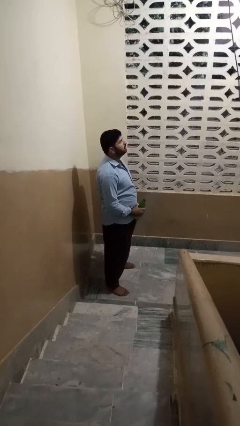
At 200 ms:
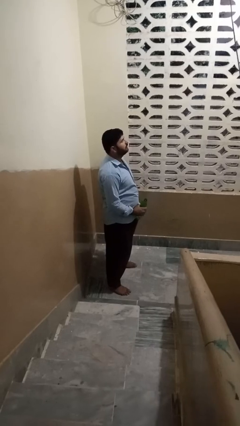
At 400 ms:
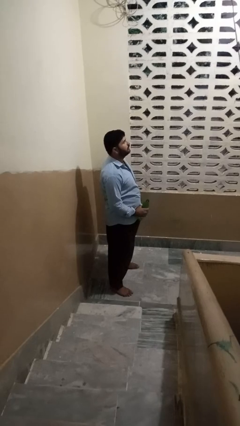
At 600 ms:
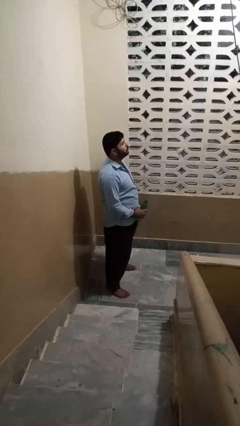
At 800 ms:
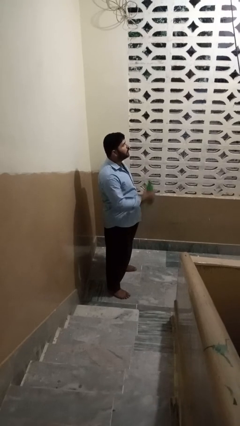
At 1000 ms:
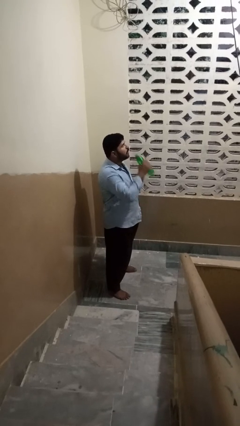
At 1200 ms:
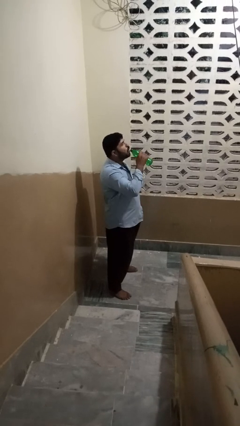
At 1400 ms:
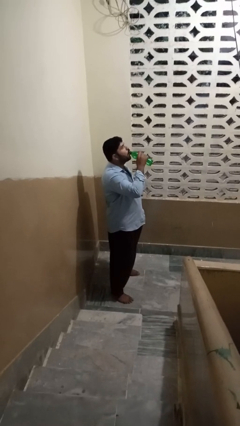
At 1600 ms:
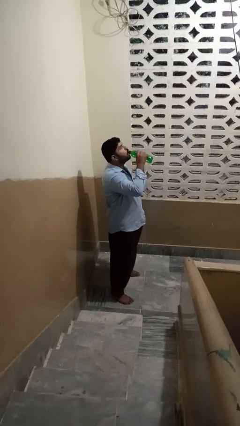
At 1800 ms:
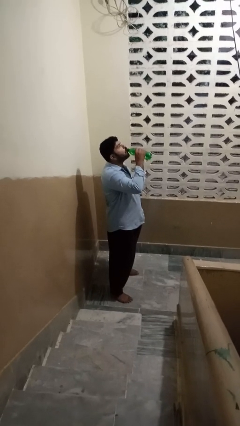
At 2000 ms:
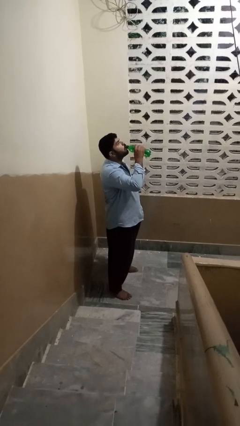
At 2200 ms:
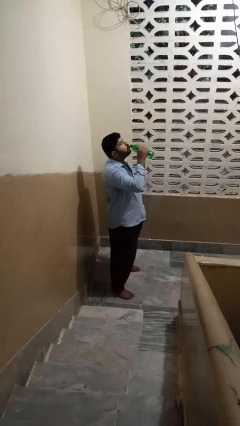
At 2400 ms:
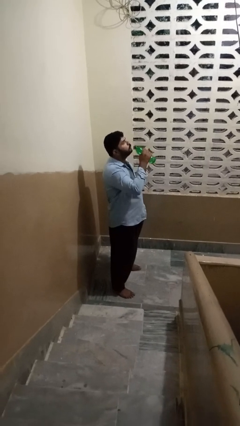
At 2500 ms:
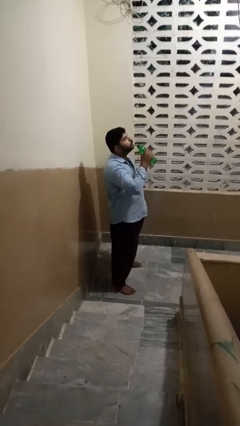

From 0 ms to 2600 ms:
person drinks from bottle

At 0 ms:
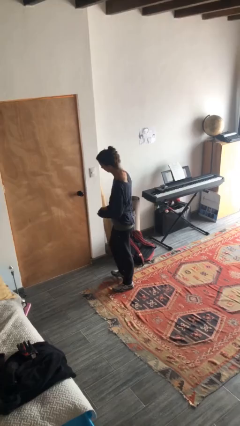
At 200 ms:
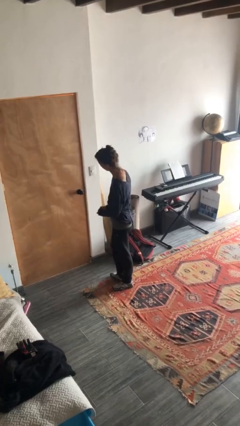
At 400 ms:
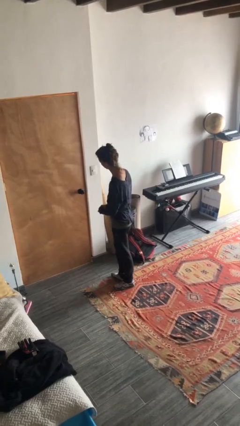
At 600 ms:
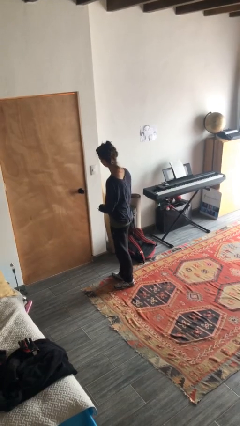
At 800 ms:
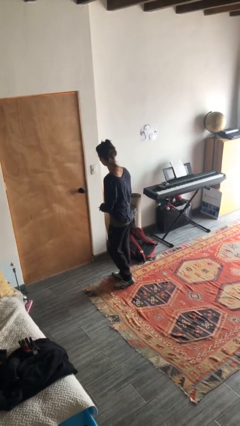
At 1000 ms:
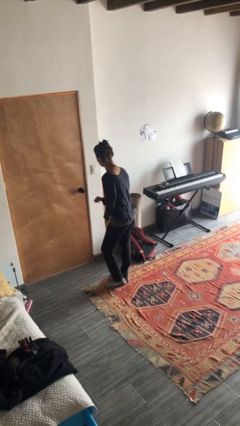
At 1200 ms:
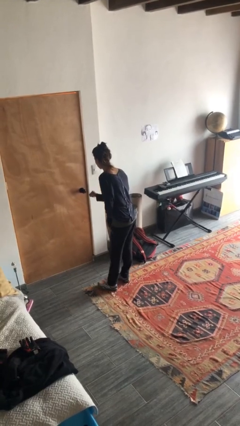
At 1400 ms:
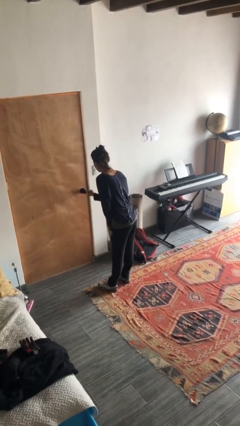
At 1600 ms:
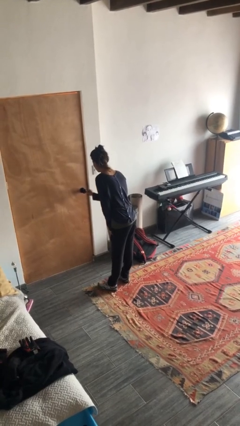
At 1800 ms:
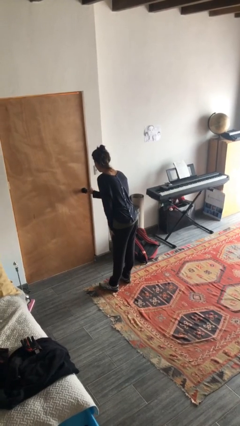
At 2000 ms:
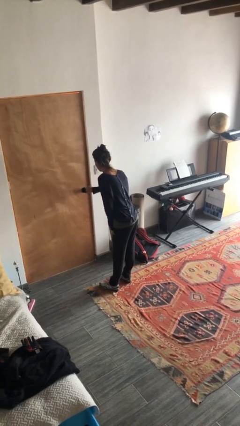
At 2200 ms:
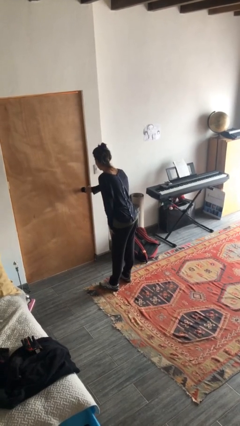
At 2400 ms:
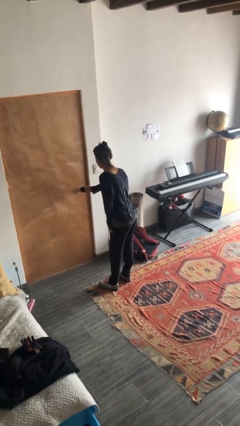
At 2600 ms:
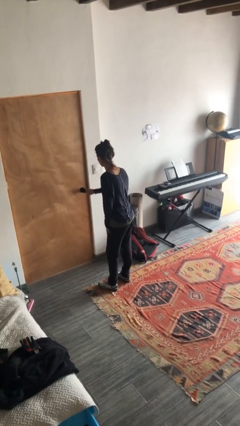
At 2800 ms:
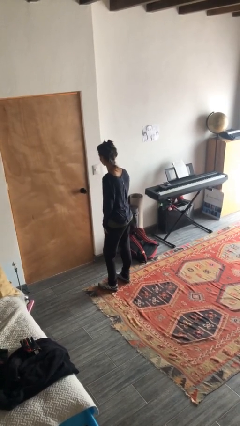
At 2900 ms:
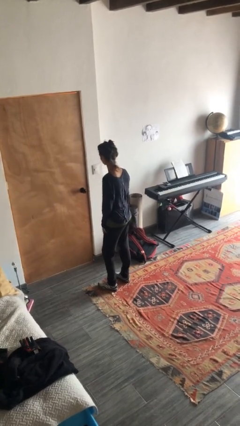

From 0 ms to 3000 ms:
person unlocks door with keys

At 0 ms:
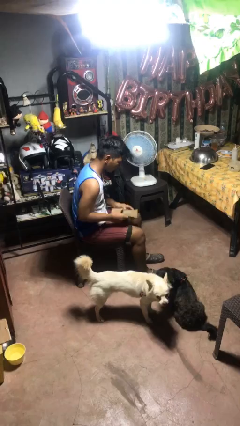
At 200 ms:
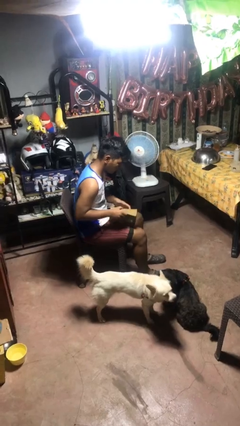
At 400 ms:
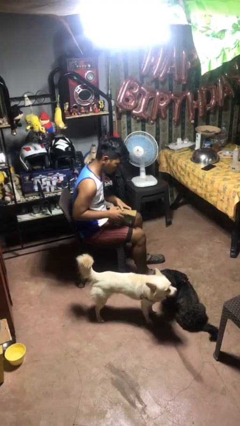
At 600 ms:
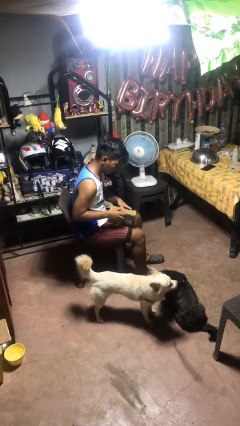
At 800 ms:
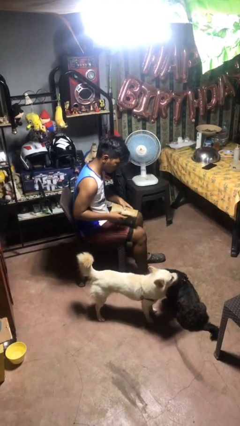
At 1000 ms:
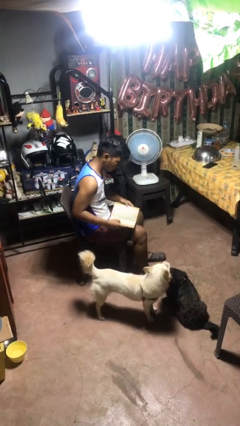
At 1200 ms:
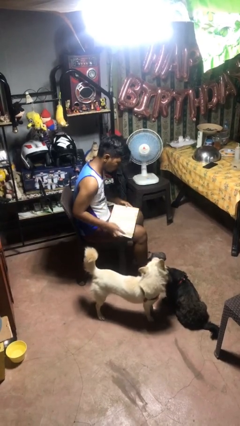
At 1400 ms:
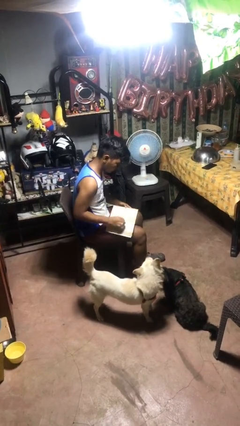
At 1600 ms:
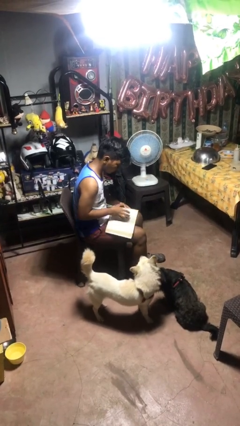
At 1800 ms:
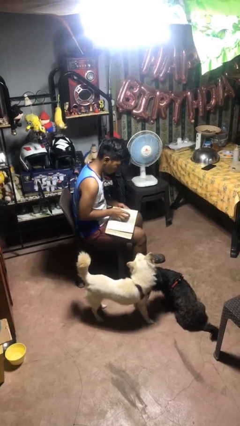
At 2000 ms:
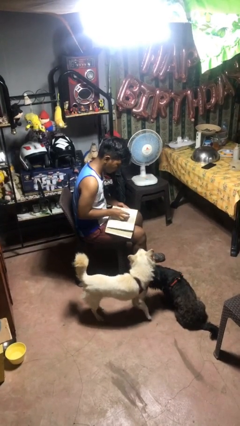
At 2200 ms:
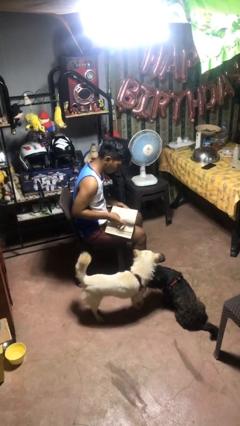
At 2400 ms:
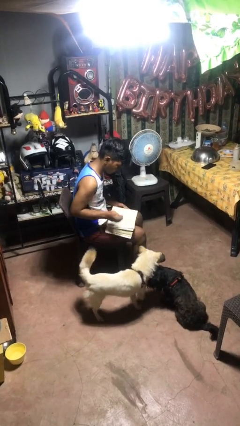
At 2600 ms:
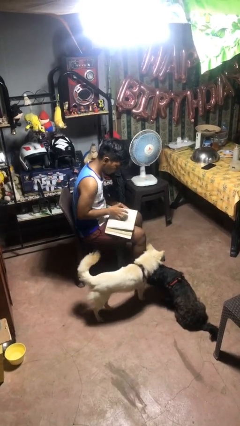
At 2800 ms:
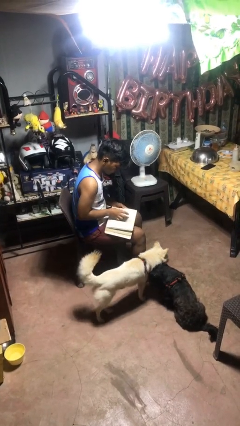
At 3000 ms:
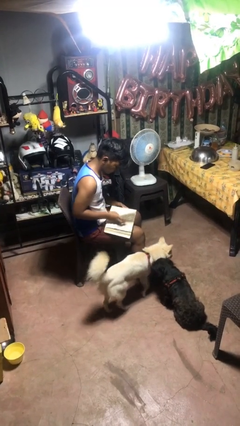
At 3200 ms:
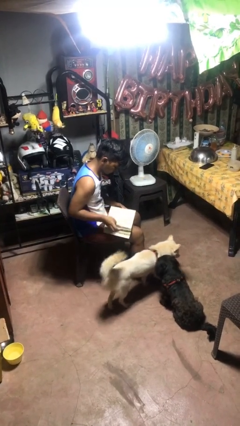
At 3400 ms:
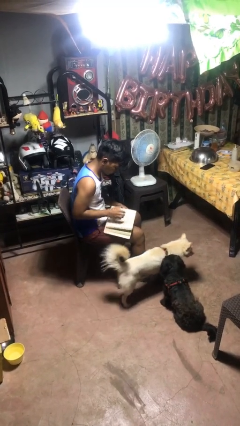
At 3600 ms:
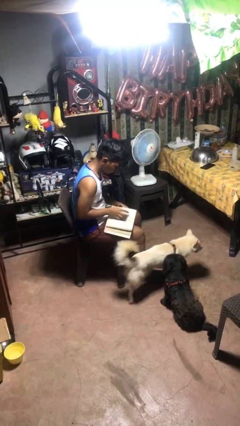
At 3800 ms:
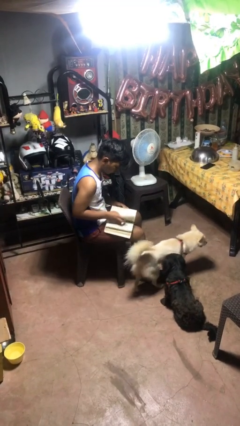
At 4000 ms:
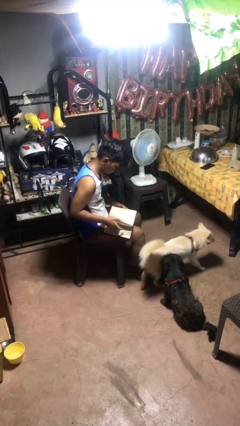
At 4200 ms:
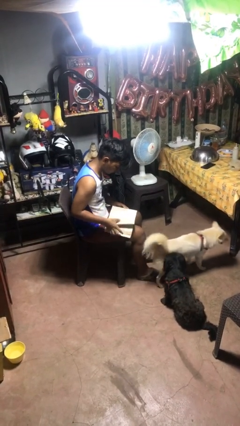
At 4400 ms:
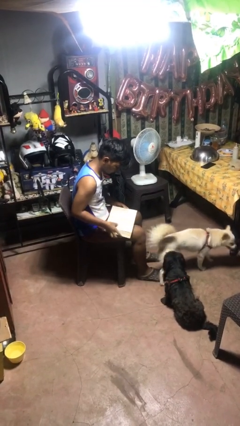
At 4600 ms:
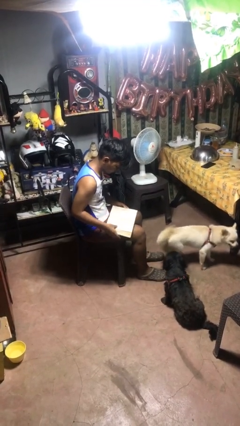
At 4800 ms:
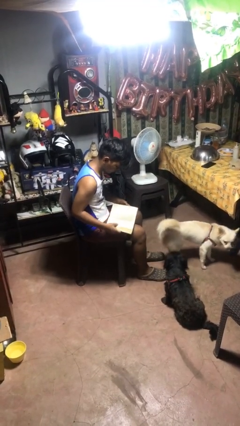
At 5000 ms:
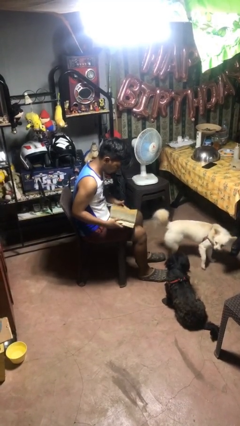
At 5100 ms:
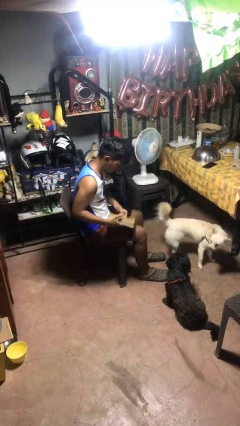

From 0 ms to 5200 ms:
person reads book

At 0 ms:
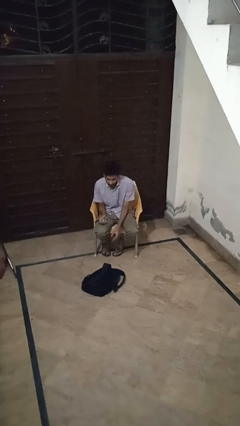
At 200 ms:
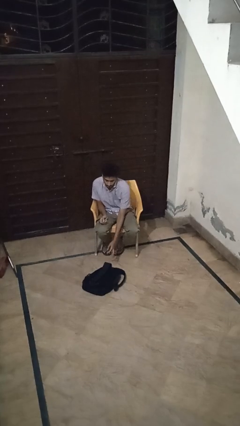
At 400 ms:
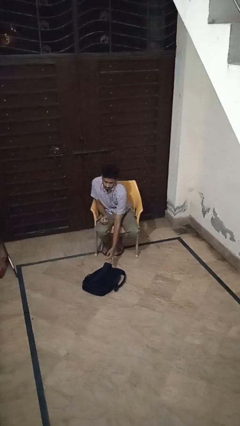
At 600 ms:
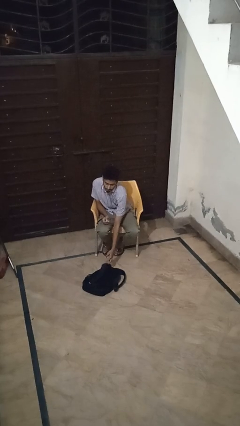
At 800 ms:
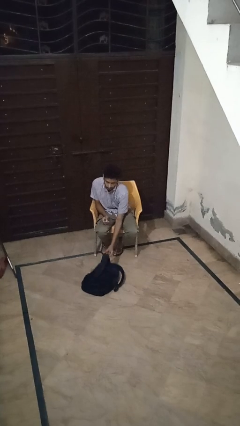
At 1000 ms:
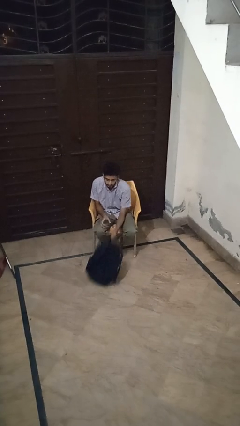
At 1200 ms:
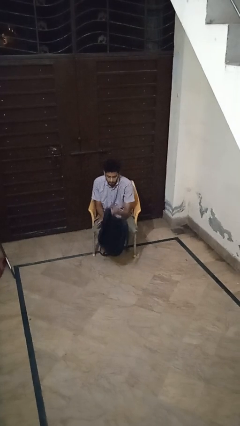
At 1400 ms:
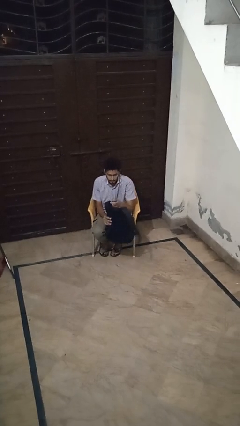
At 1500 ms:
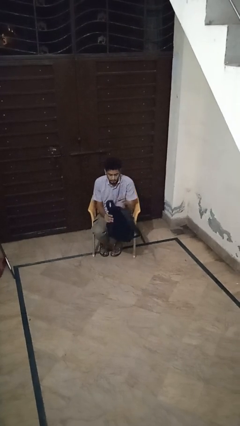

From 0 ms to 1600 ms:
person picks up object from floor

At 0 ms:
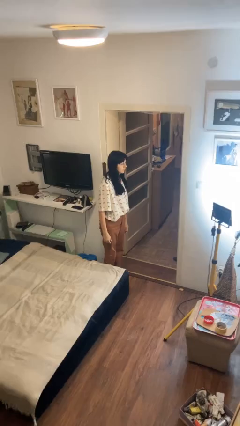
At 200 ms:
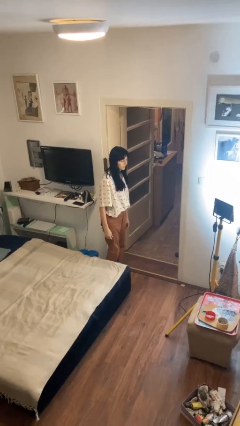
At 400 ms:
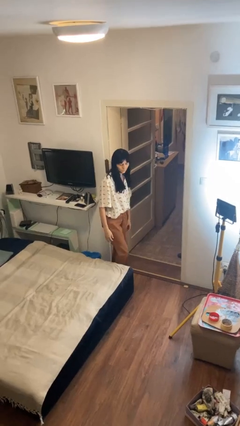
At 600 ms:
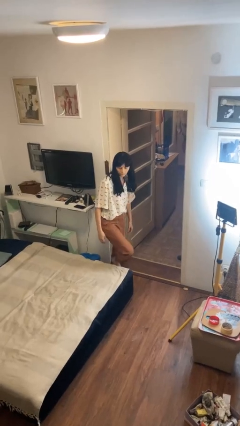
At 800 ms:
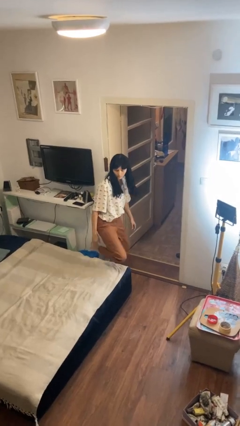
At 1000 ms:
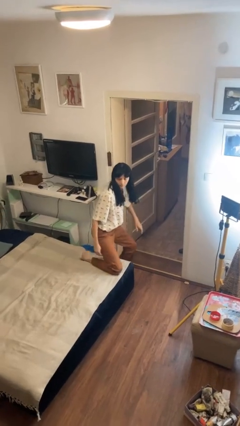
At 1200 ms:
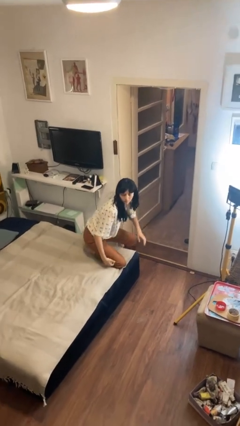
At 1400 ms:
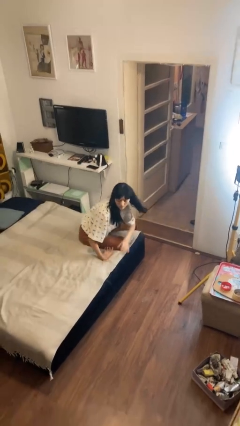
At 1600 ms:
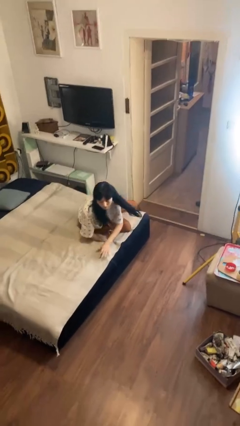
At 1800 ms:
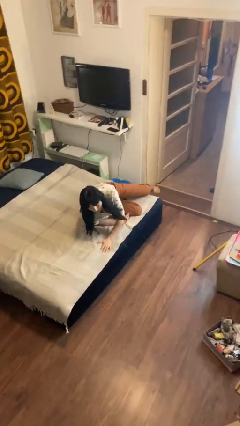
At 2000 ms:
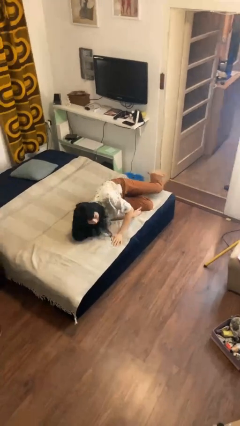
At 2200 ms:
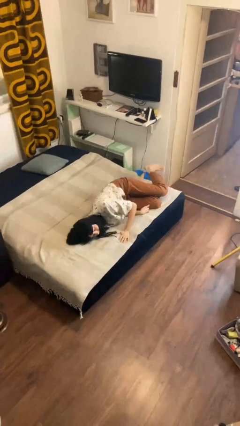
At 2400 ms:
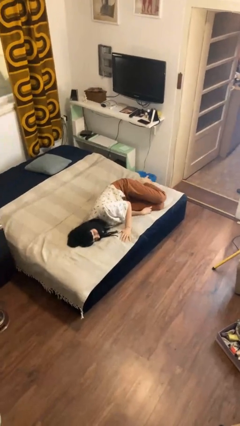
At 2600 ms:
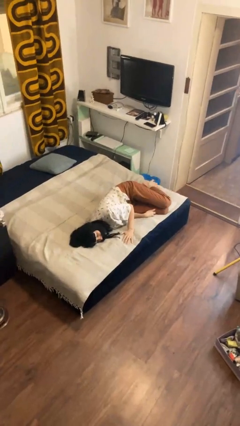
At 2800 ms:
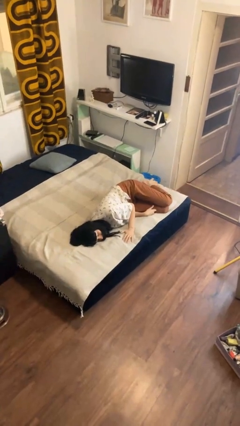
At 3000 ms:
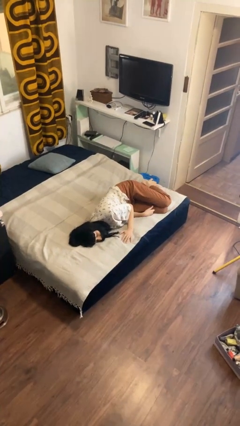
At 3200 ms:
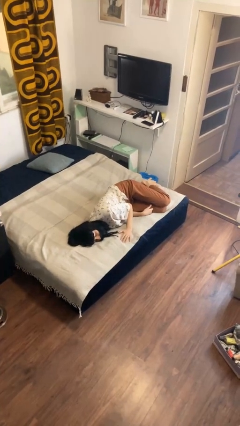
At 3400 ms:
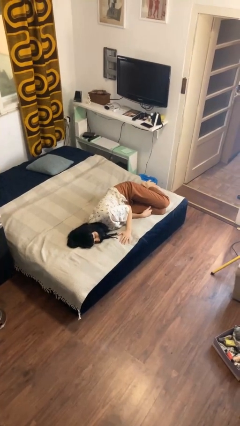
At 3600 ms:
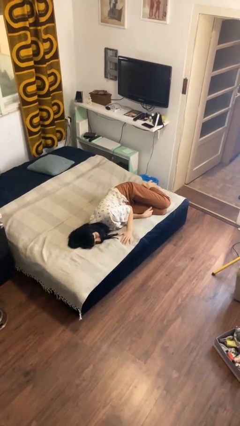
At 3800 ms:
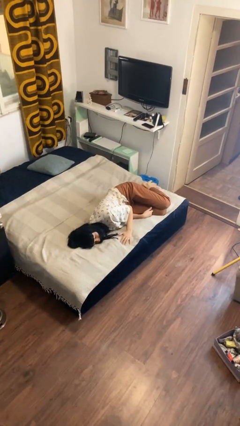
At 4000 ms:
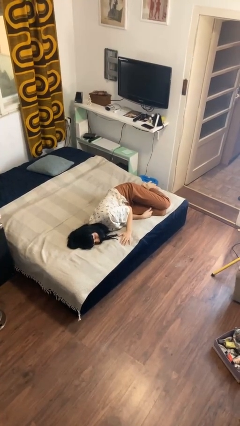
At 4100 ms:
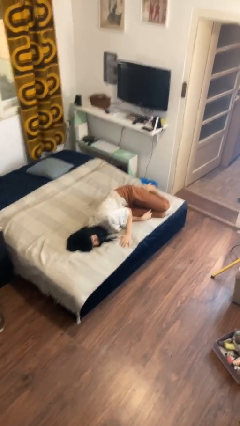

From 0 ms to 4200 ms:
person lies down on bed

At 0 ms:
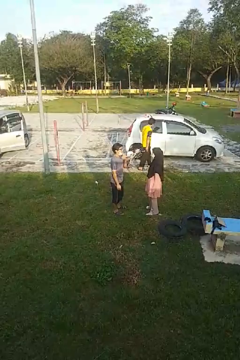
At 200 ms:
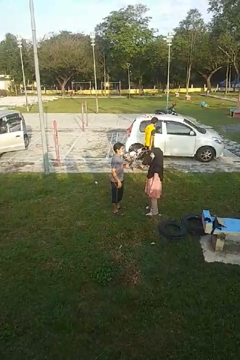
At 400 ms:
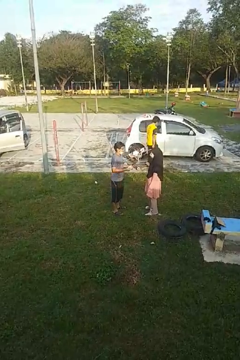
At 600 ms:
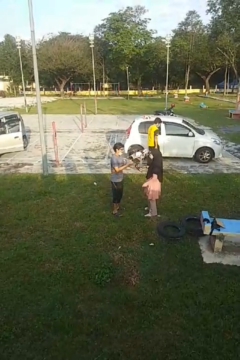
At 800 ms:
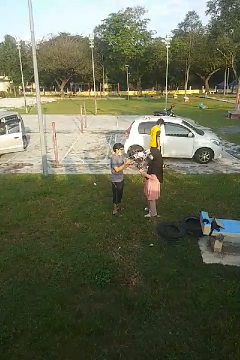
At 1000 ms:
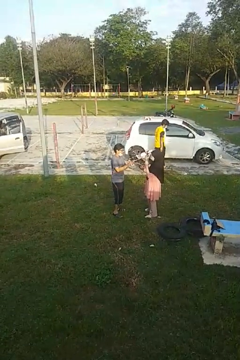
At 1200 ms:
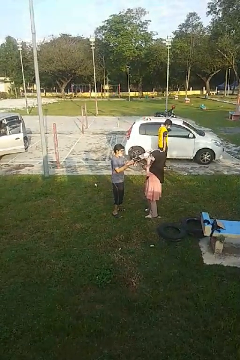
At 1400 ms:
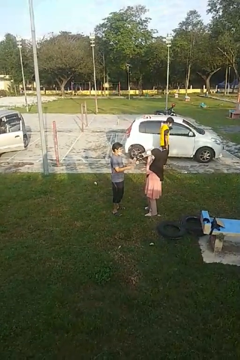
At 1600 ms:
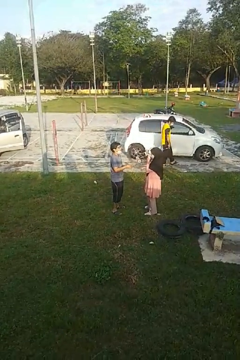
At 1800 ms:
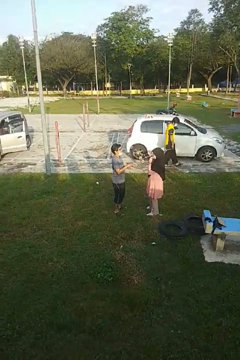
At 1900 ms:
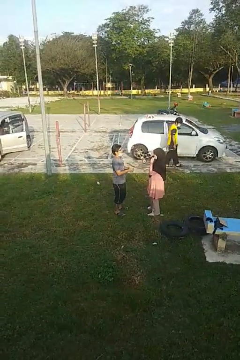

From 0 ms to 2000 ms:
person talks to person
